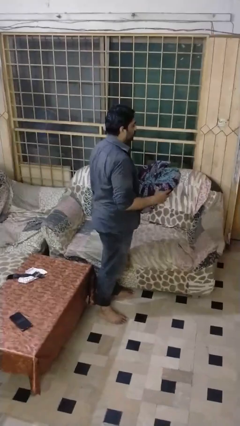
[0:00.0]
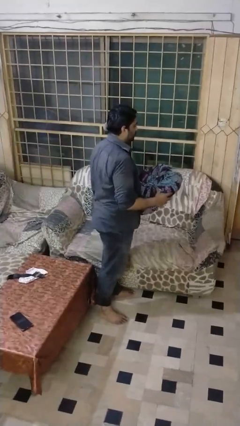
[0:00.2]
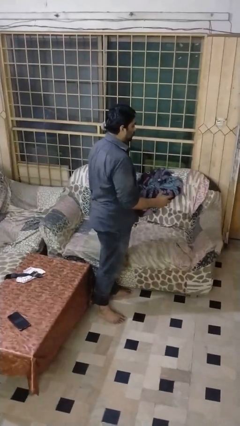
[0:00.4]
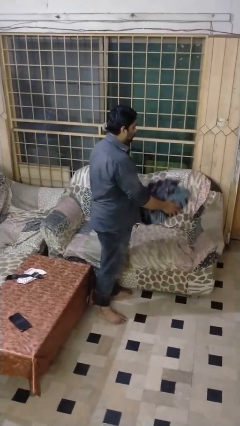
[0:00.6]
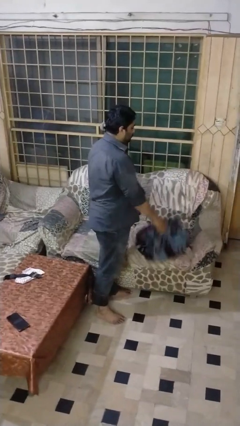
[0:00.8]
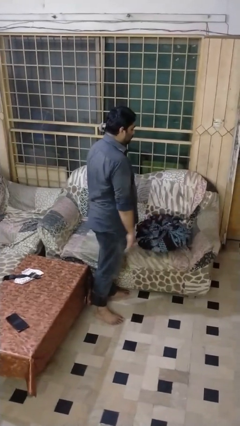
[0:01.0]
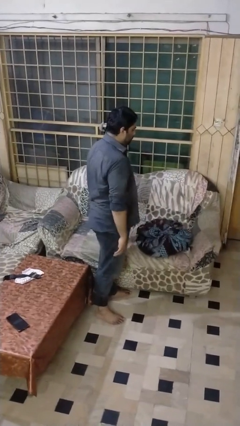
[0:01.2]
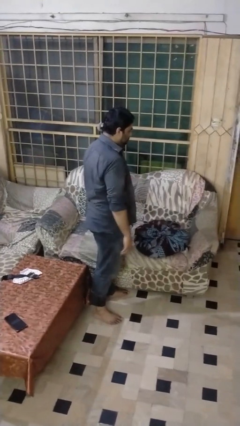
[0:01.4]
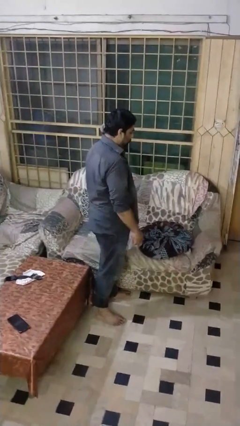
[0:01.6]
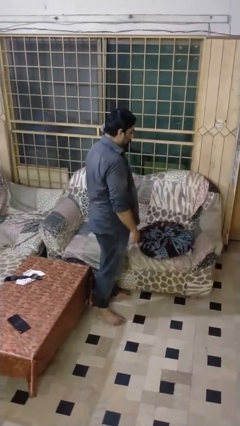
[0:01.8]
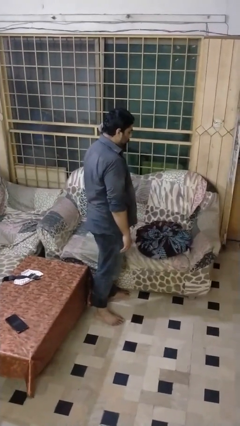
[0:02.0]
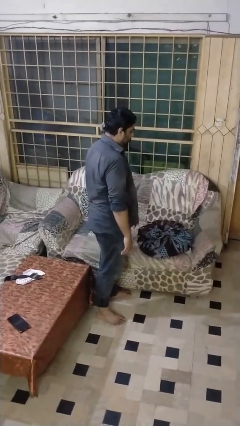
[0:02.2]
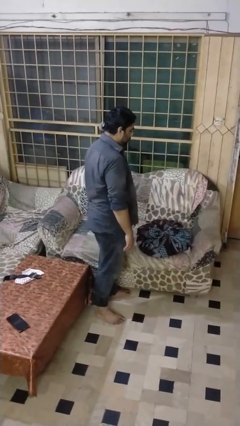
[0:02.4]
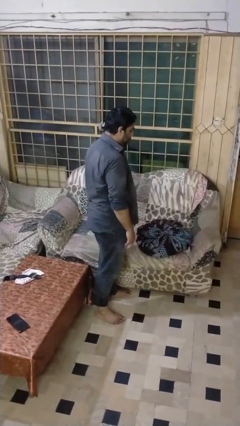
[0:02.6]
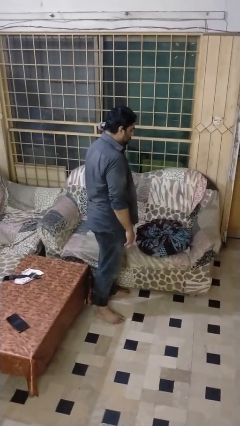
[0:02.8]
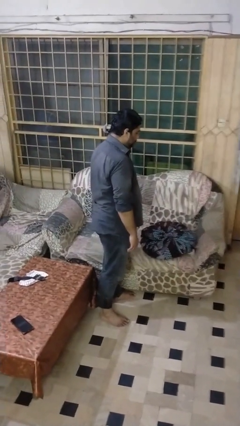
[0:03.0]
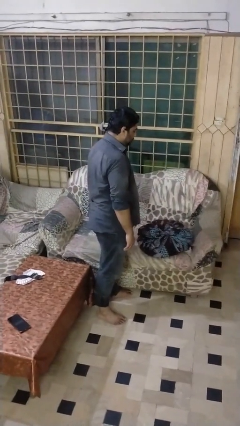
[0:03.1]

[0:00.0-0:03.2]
person puts down object on couch

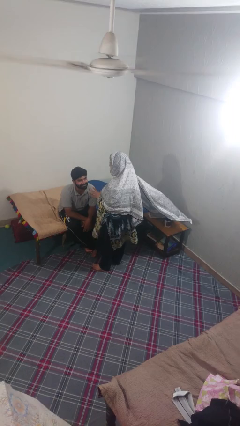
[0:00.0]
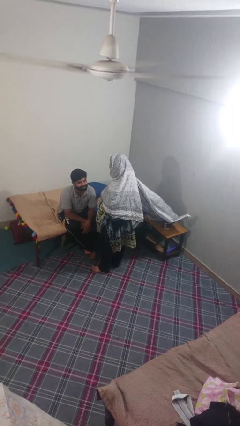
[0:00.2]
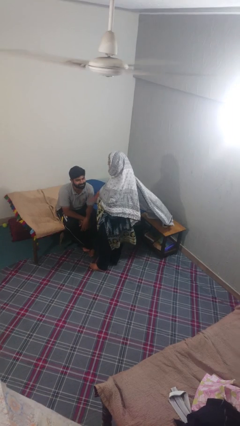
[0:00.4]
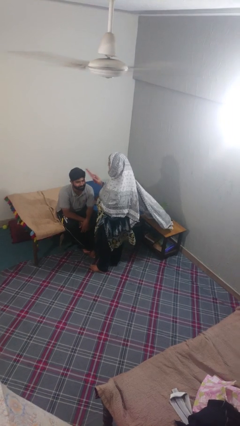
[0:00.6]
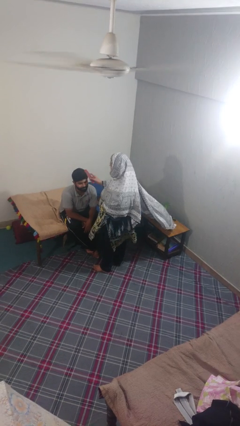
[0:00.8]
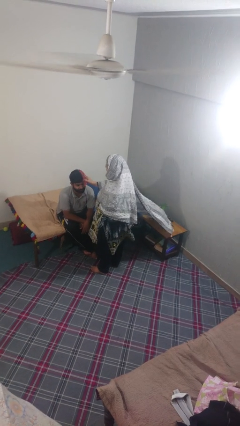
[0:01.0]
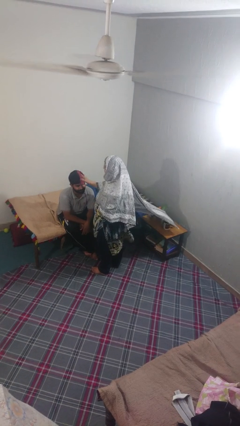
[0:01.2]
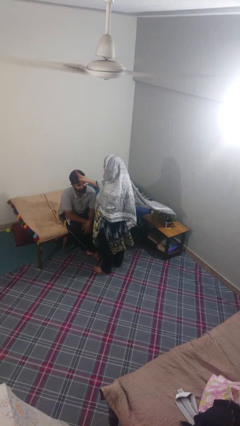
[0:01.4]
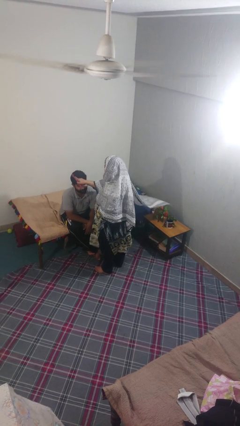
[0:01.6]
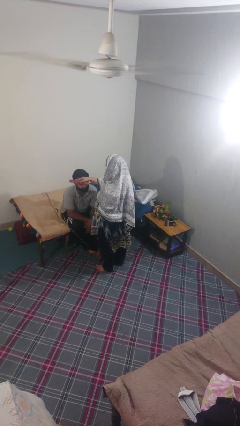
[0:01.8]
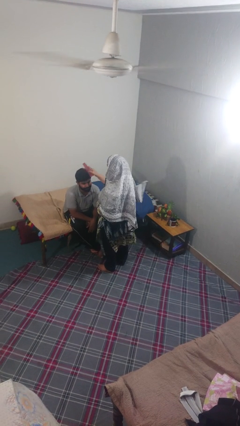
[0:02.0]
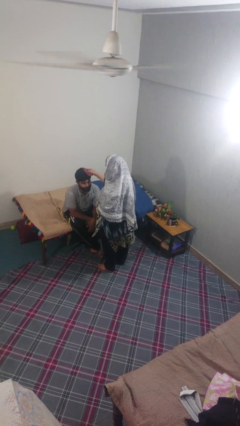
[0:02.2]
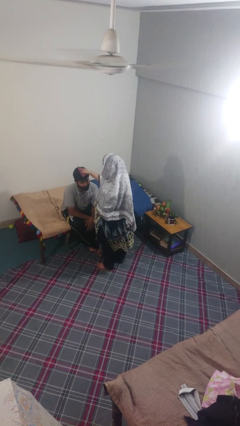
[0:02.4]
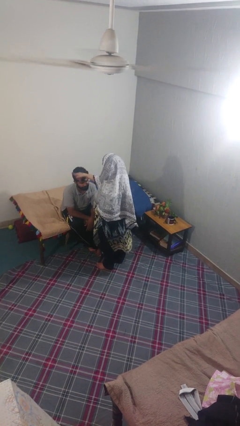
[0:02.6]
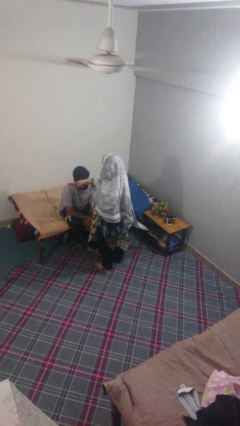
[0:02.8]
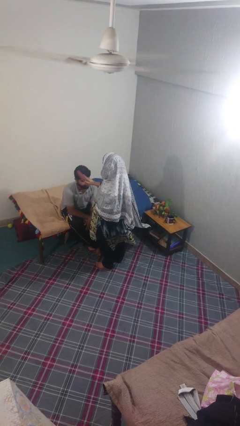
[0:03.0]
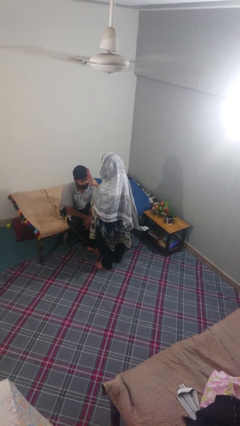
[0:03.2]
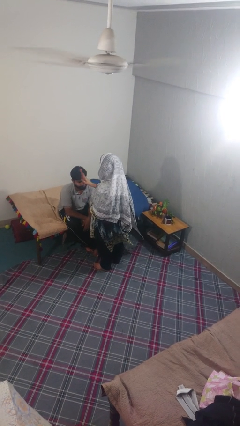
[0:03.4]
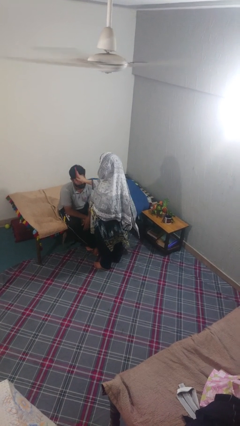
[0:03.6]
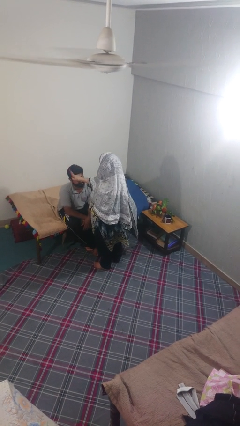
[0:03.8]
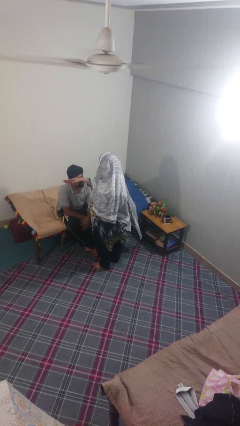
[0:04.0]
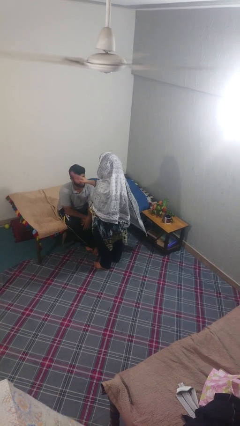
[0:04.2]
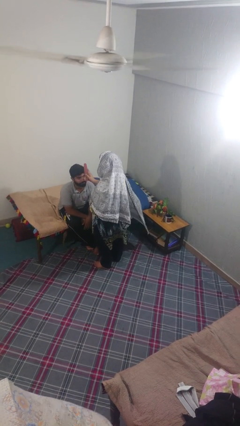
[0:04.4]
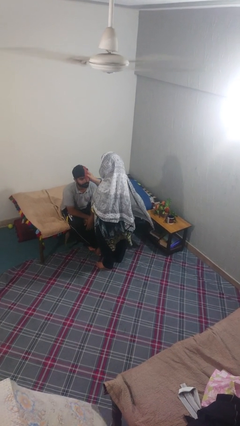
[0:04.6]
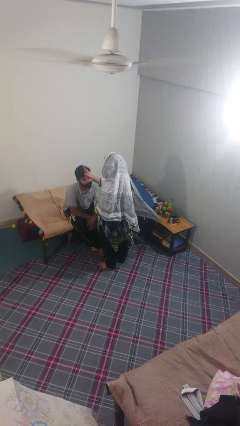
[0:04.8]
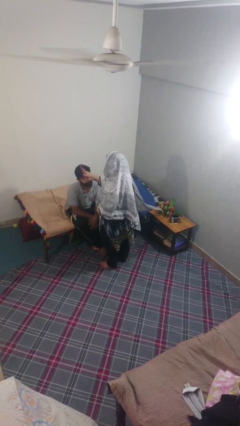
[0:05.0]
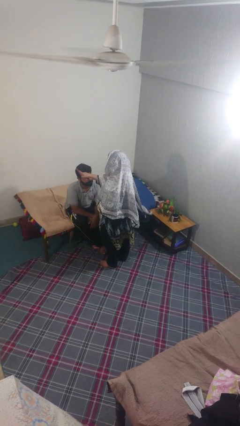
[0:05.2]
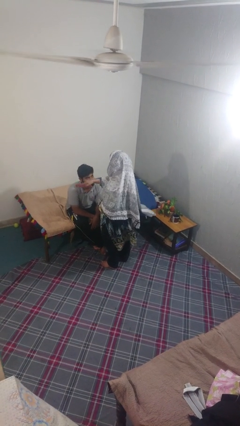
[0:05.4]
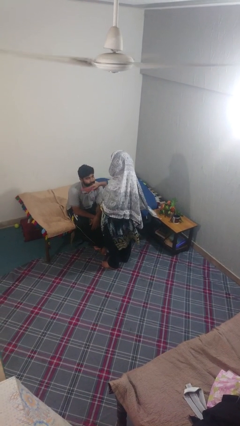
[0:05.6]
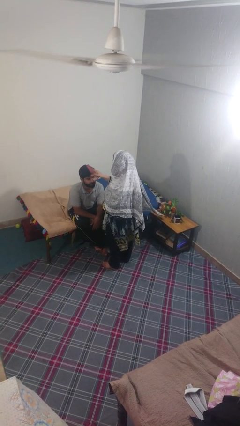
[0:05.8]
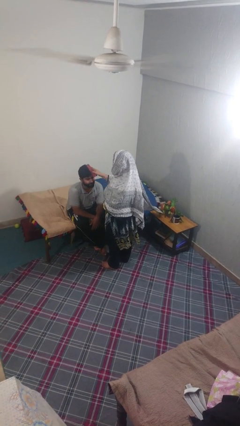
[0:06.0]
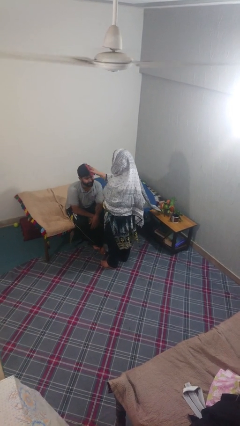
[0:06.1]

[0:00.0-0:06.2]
person brushes hair of person

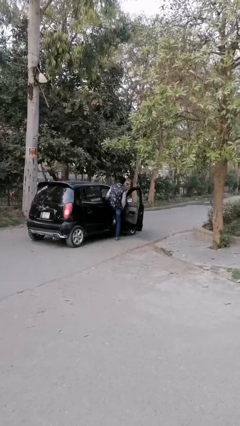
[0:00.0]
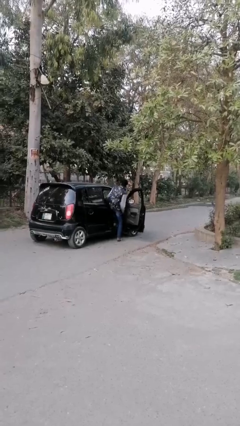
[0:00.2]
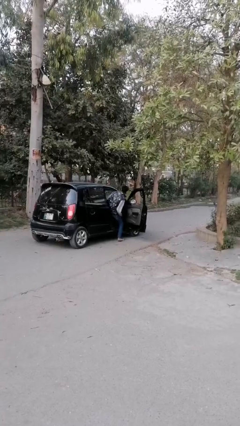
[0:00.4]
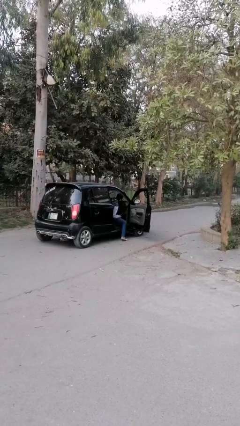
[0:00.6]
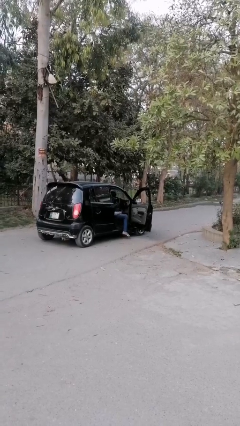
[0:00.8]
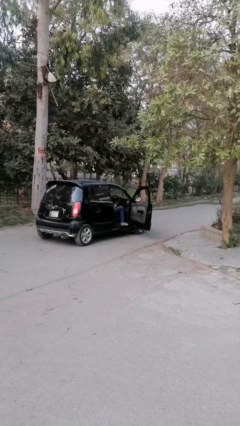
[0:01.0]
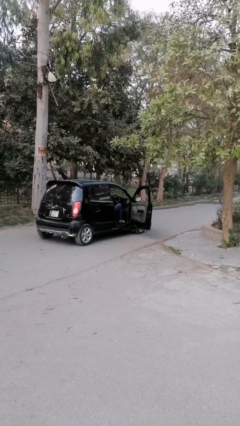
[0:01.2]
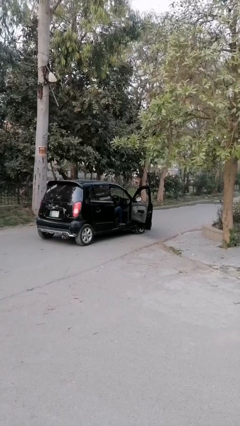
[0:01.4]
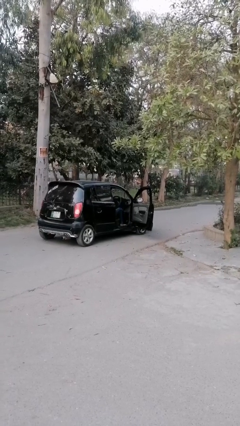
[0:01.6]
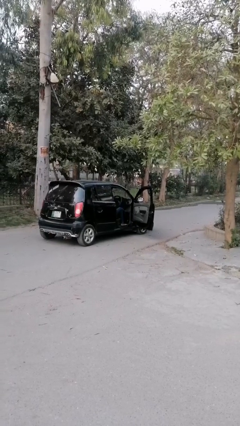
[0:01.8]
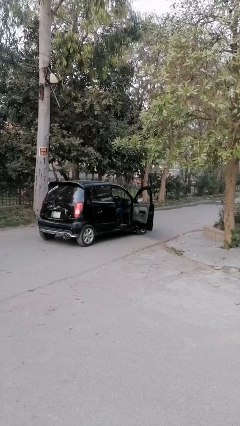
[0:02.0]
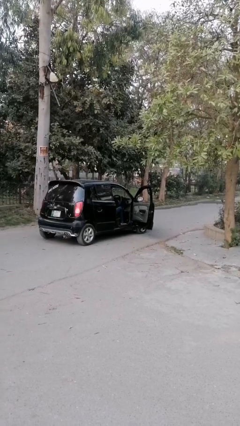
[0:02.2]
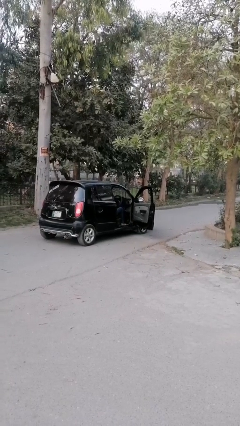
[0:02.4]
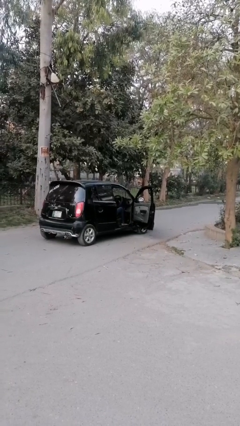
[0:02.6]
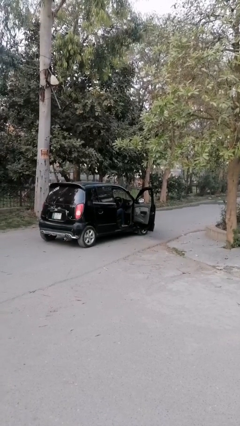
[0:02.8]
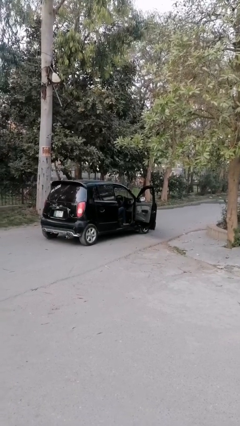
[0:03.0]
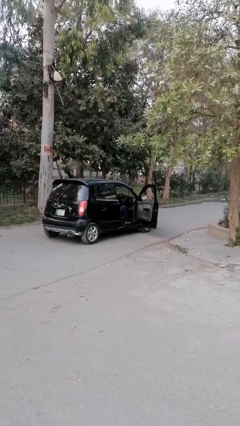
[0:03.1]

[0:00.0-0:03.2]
person enters car

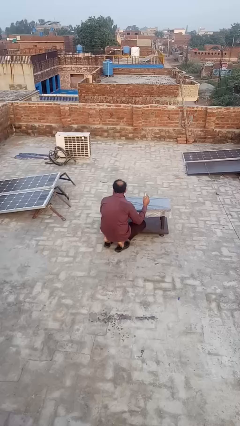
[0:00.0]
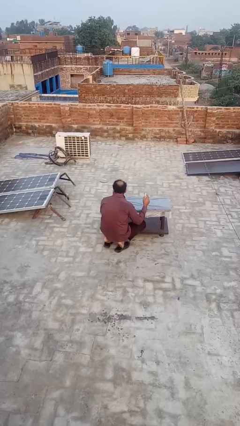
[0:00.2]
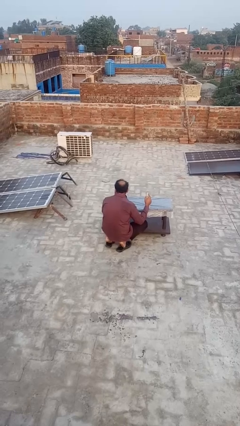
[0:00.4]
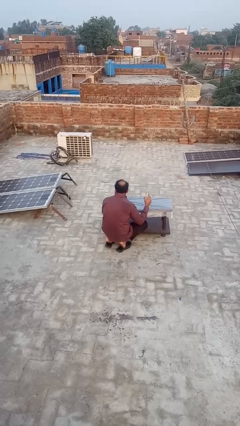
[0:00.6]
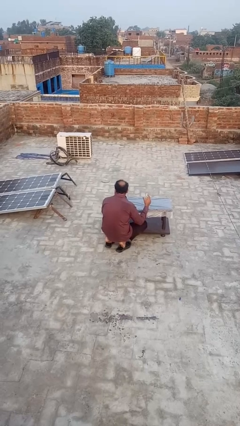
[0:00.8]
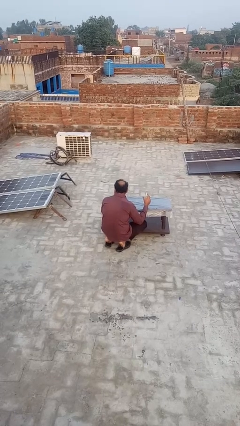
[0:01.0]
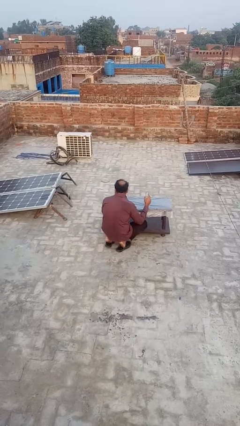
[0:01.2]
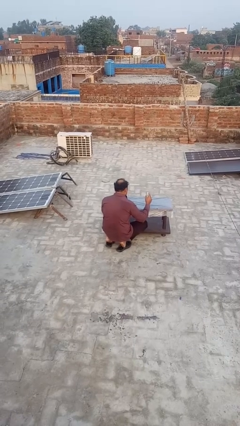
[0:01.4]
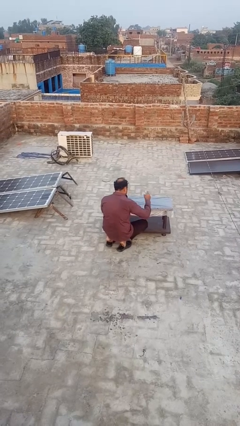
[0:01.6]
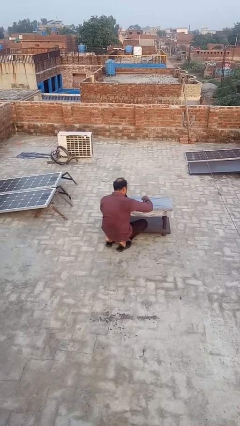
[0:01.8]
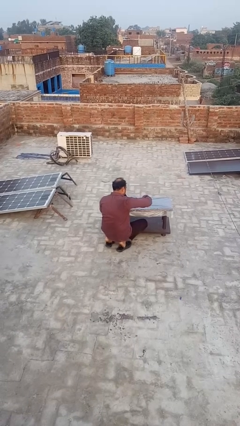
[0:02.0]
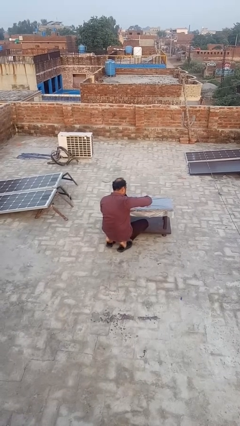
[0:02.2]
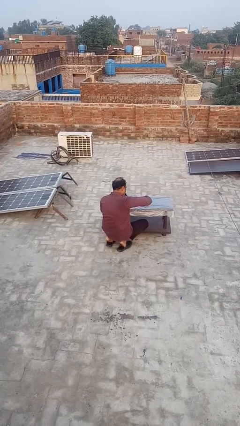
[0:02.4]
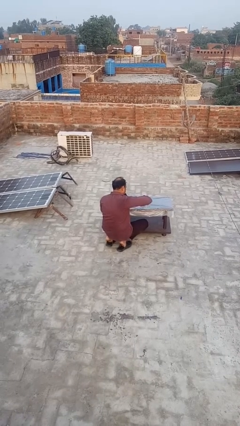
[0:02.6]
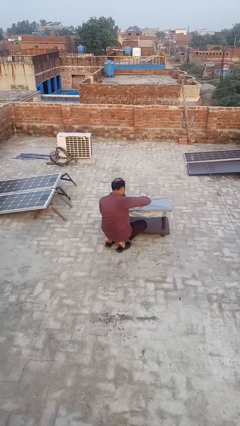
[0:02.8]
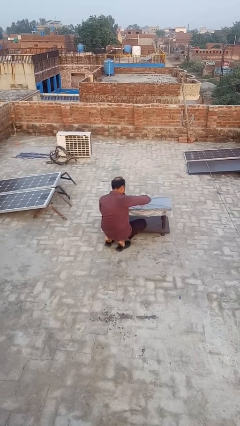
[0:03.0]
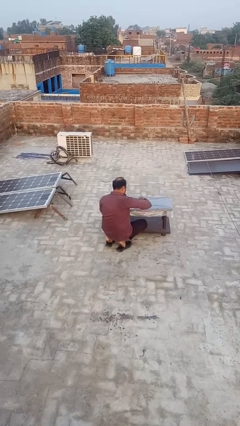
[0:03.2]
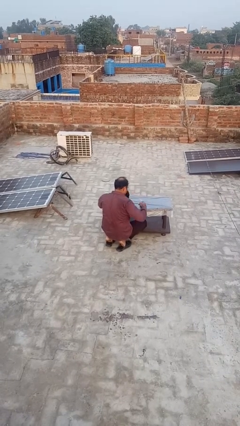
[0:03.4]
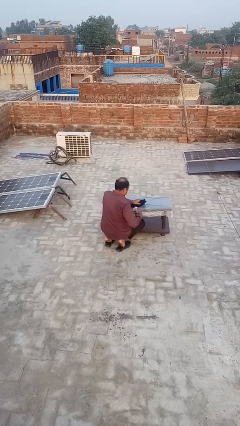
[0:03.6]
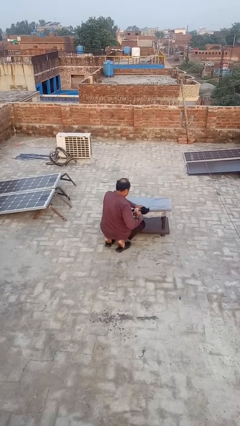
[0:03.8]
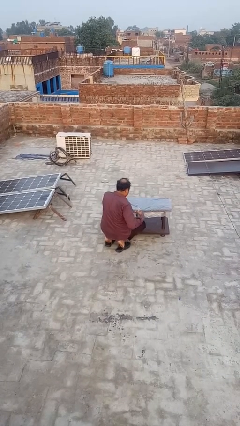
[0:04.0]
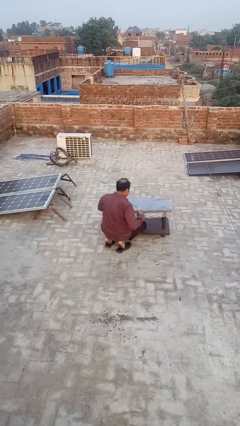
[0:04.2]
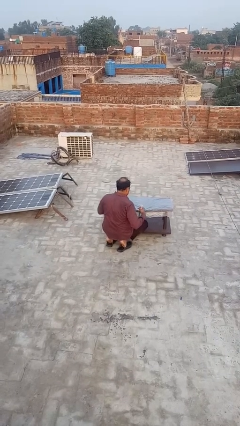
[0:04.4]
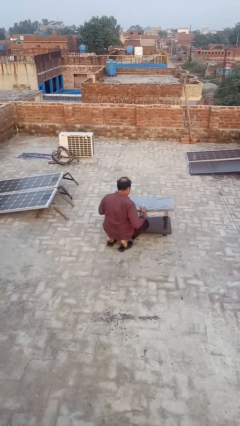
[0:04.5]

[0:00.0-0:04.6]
person sprays from bottle
